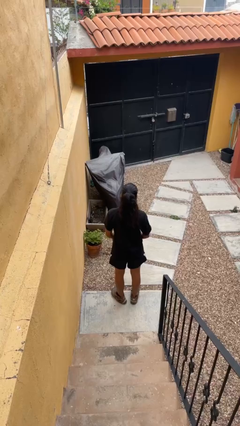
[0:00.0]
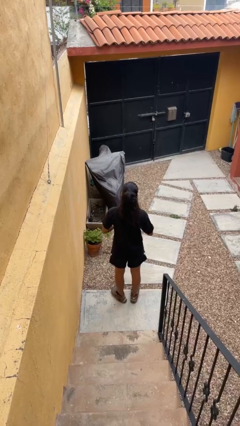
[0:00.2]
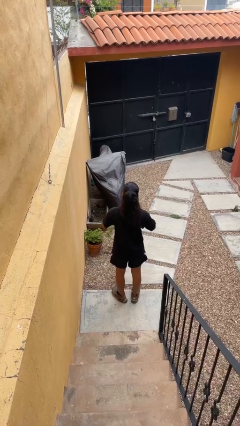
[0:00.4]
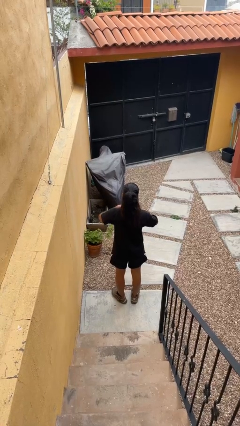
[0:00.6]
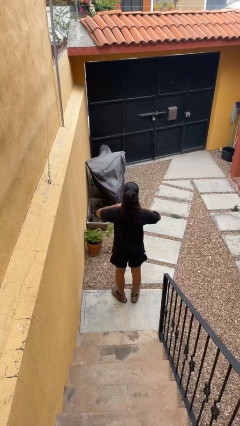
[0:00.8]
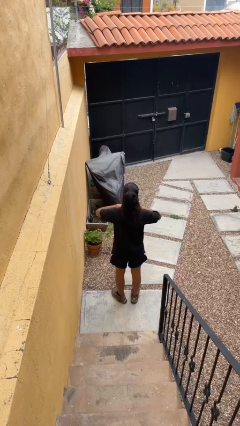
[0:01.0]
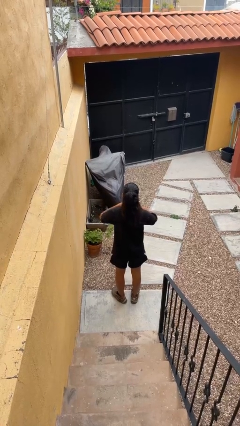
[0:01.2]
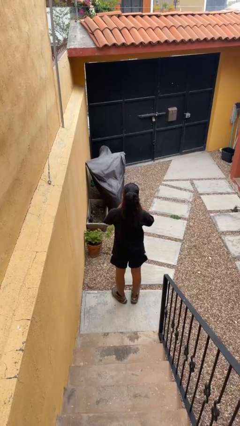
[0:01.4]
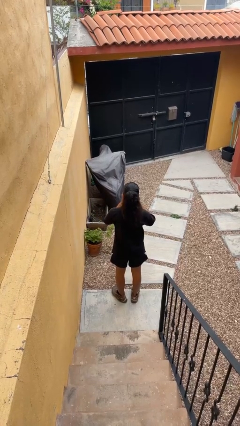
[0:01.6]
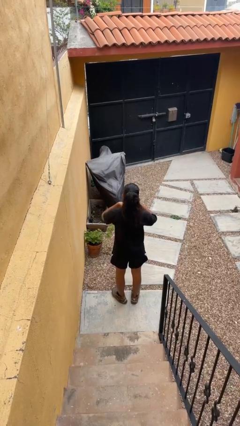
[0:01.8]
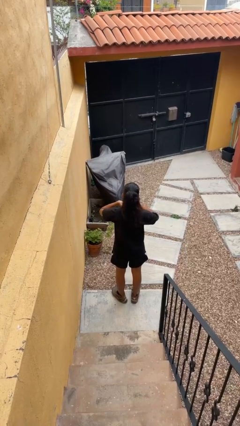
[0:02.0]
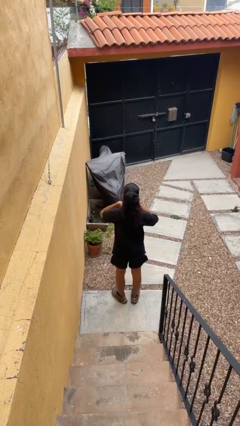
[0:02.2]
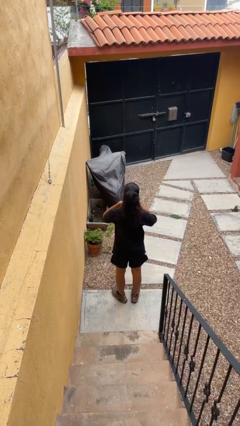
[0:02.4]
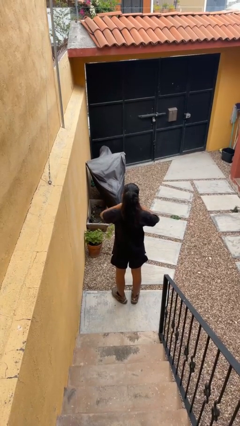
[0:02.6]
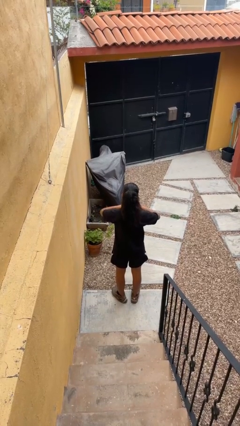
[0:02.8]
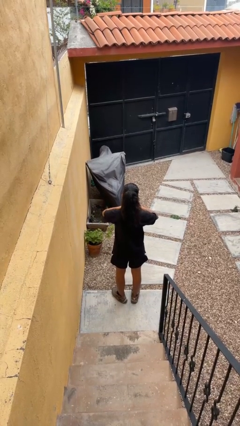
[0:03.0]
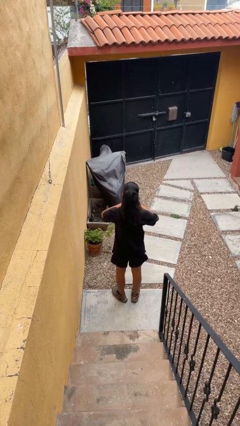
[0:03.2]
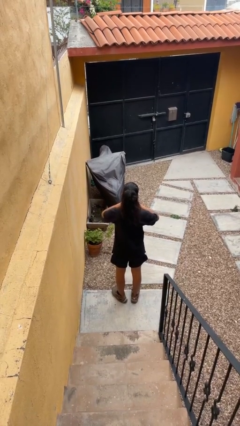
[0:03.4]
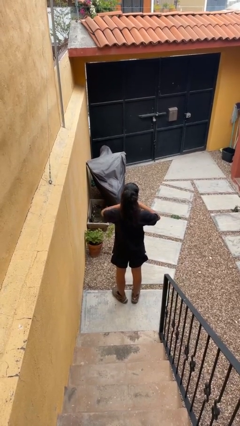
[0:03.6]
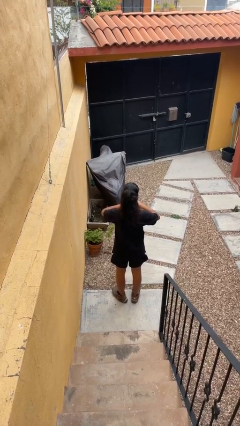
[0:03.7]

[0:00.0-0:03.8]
person cracks knuckles

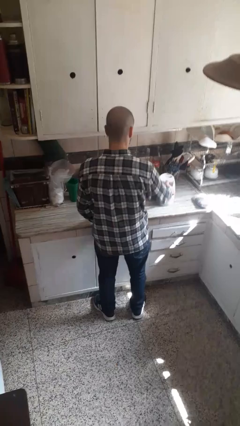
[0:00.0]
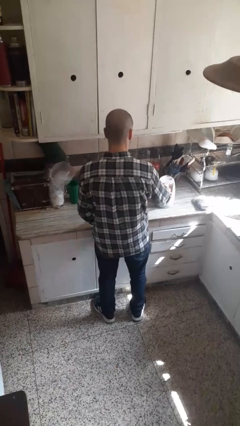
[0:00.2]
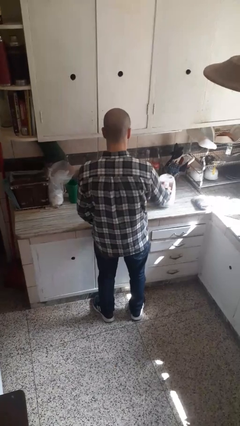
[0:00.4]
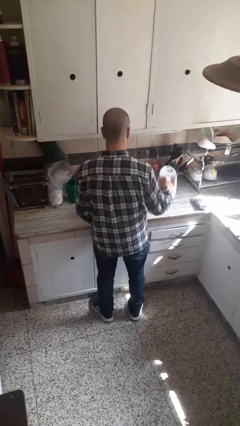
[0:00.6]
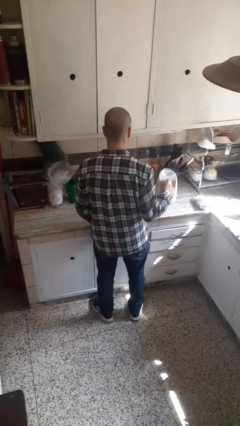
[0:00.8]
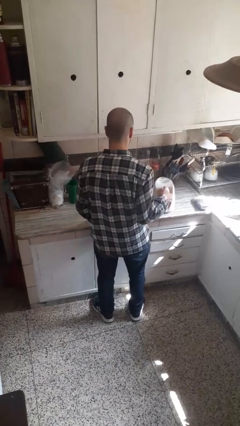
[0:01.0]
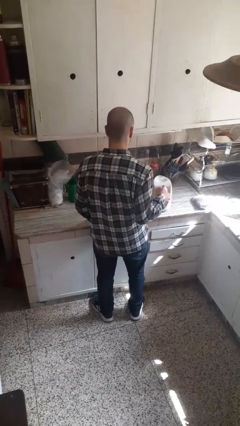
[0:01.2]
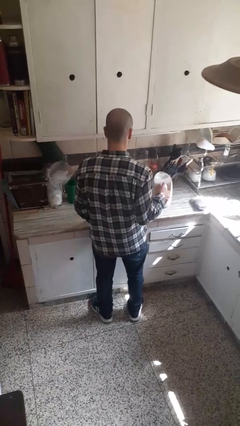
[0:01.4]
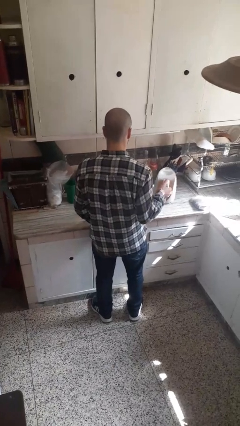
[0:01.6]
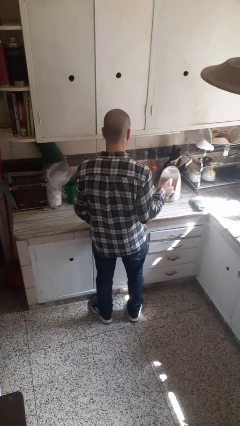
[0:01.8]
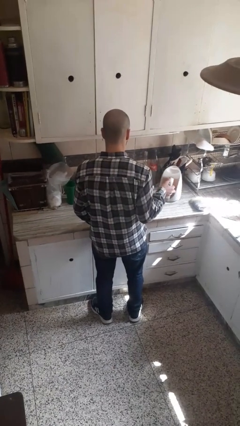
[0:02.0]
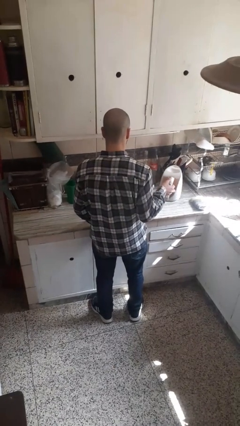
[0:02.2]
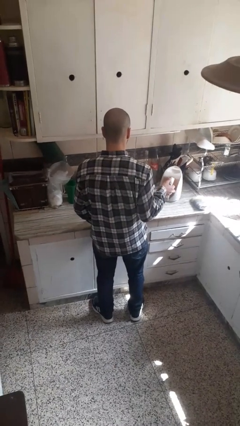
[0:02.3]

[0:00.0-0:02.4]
person picks up object from countertop

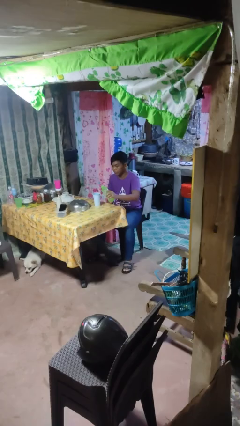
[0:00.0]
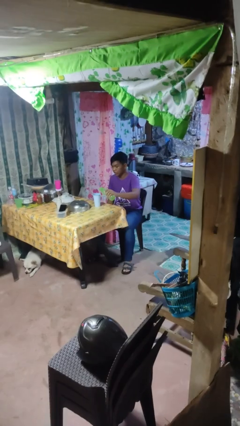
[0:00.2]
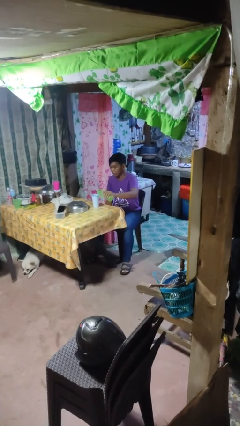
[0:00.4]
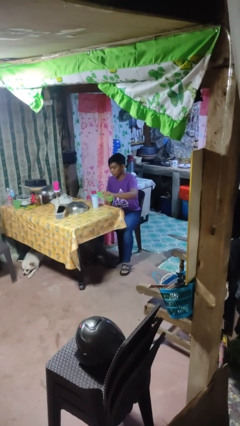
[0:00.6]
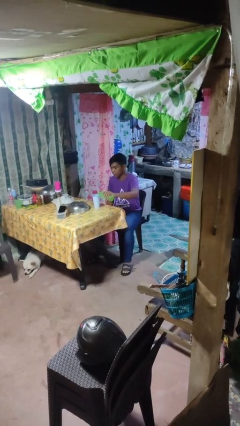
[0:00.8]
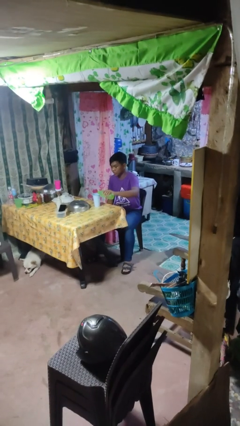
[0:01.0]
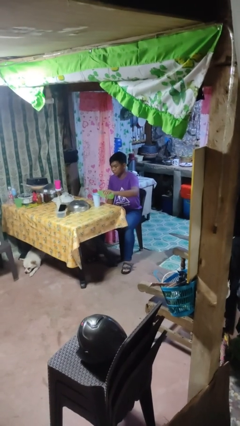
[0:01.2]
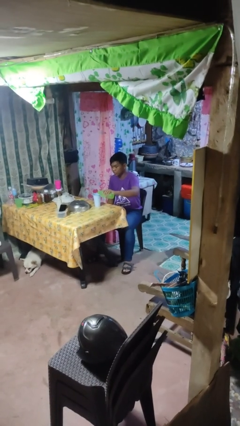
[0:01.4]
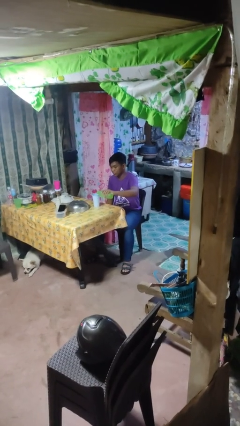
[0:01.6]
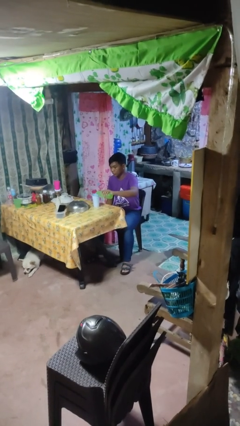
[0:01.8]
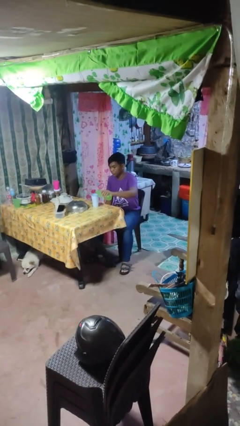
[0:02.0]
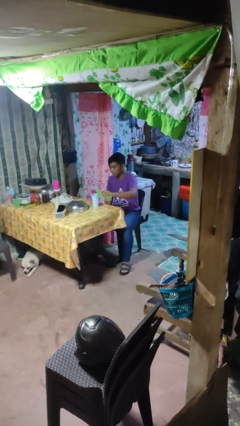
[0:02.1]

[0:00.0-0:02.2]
person pours liquid into cup

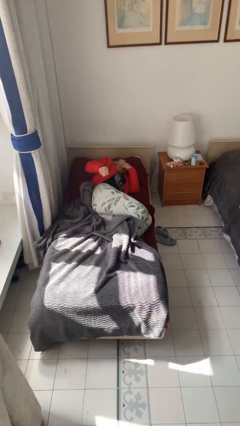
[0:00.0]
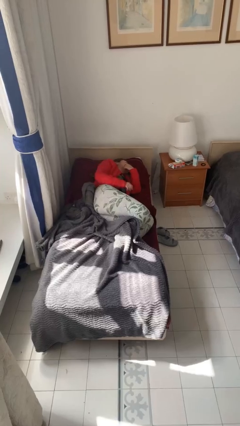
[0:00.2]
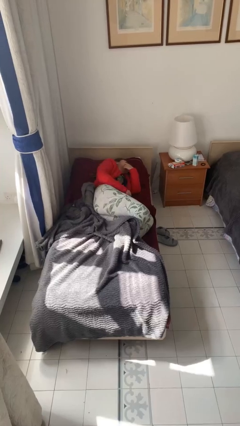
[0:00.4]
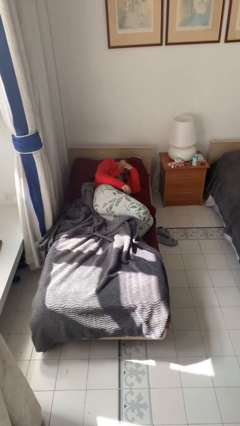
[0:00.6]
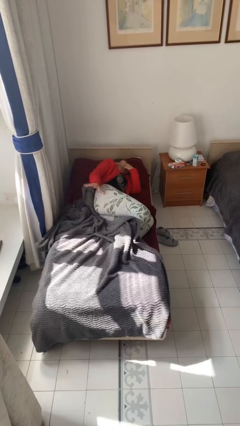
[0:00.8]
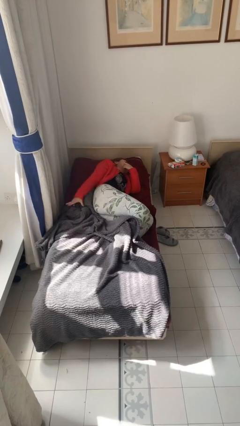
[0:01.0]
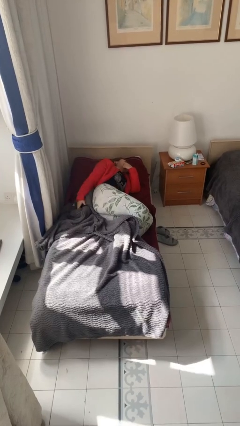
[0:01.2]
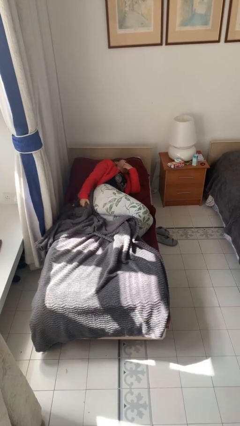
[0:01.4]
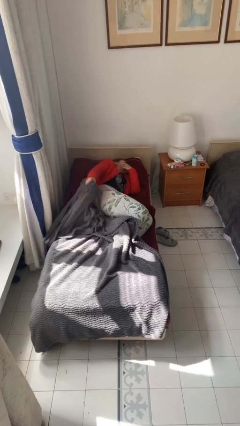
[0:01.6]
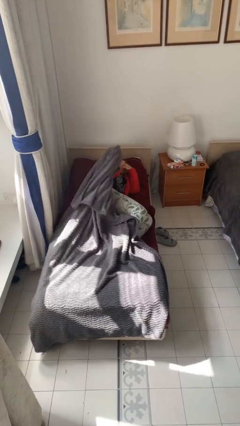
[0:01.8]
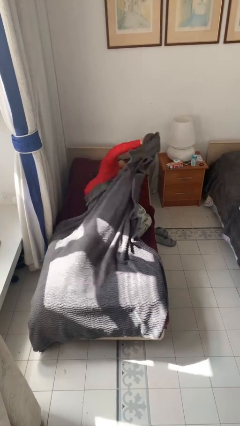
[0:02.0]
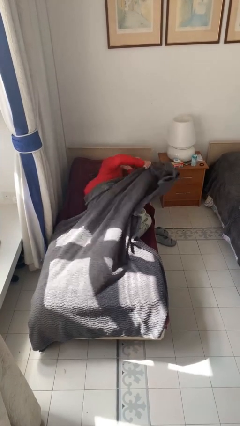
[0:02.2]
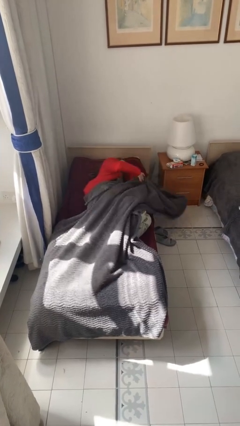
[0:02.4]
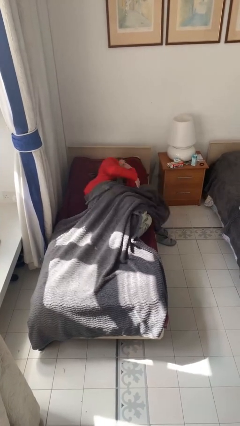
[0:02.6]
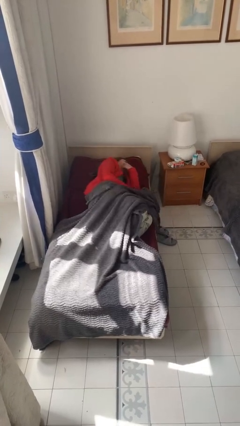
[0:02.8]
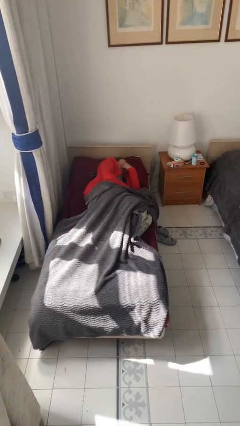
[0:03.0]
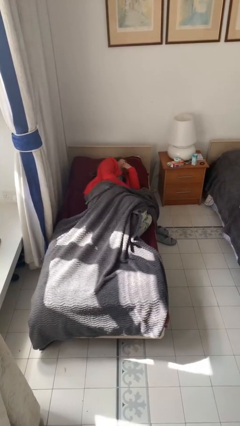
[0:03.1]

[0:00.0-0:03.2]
person covers with bedsheets

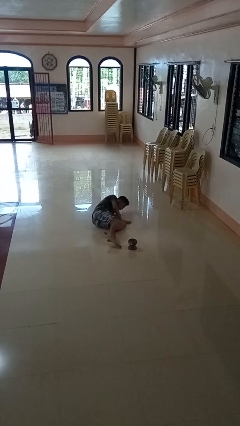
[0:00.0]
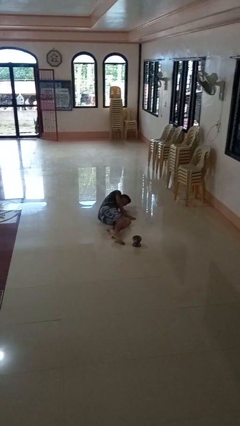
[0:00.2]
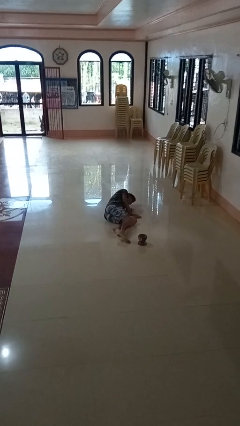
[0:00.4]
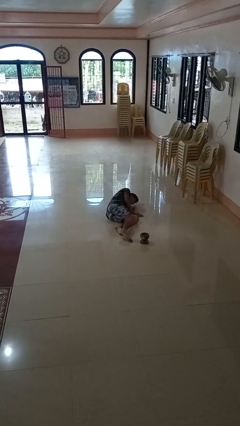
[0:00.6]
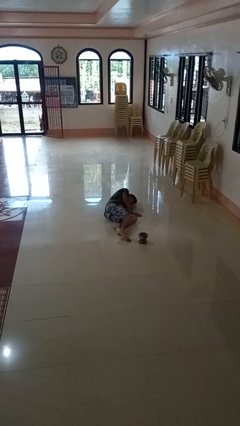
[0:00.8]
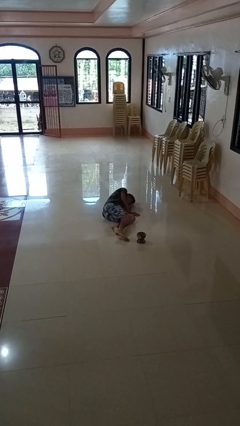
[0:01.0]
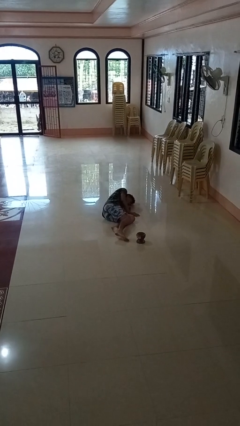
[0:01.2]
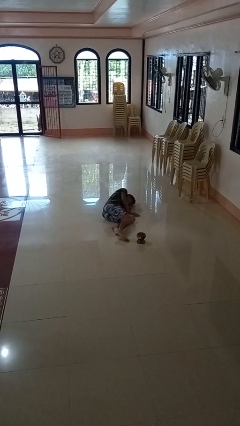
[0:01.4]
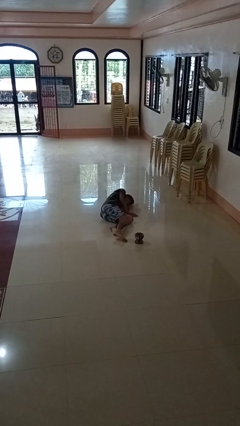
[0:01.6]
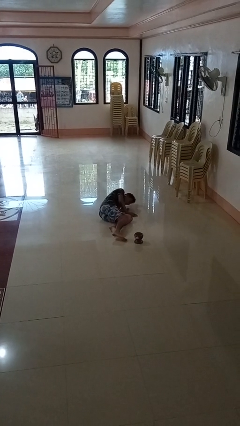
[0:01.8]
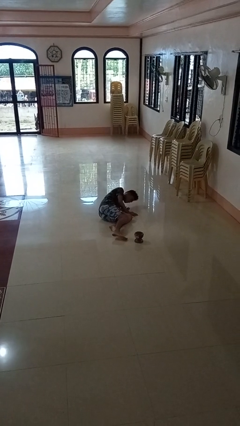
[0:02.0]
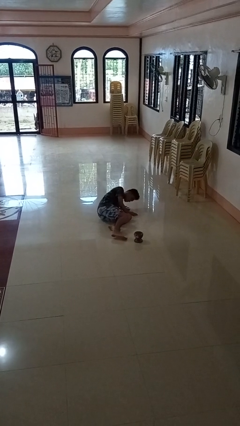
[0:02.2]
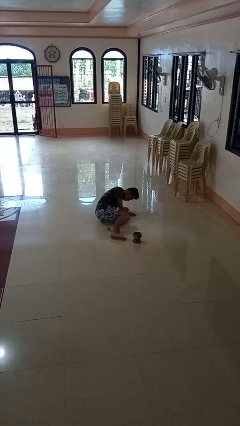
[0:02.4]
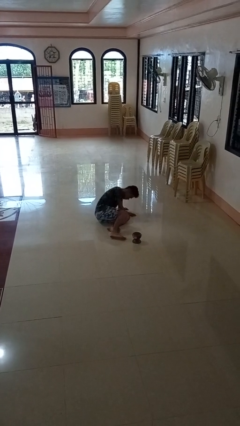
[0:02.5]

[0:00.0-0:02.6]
person lies down on floor

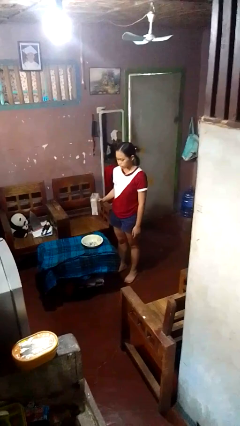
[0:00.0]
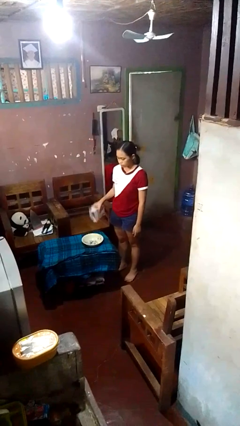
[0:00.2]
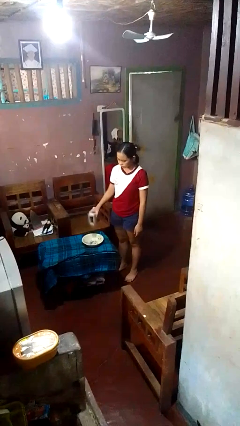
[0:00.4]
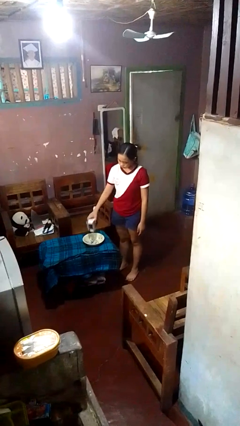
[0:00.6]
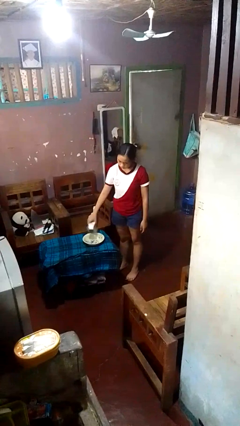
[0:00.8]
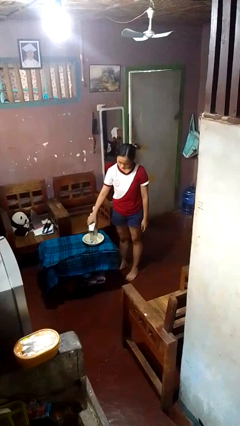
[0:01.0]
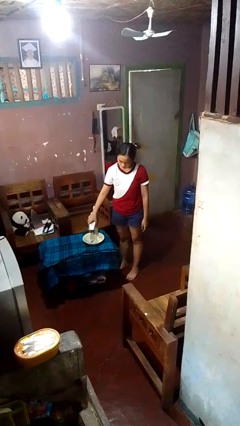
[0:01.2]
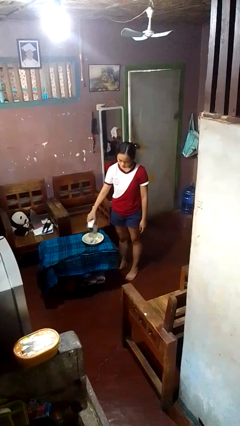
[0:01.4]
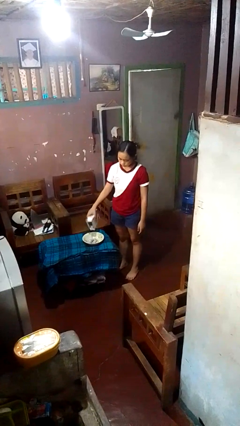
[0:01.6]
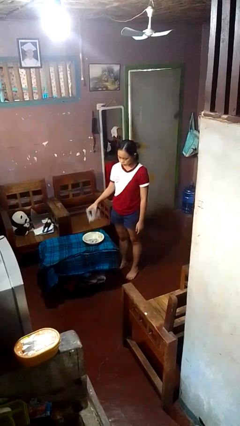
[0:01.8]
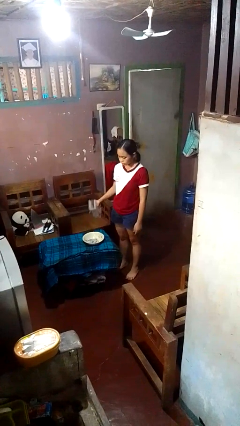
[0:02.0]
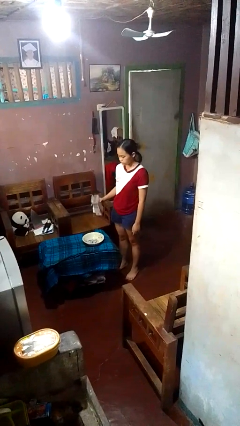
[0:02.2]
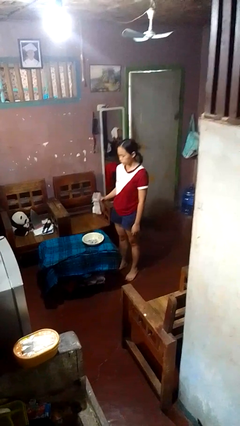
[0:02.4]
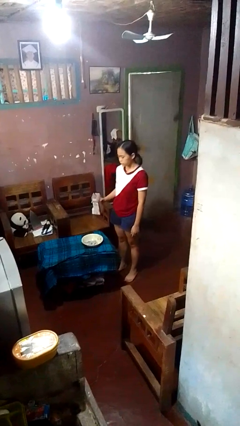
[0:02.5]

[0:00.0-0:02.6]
person pours into bowl

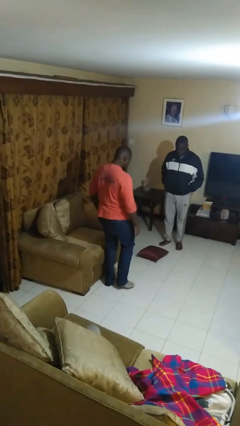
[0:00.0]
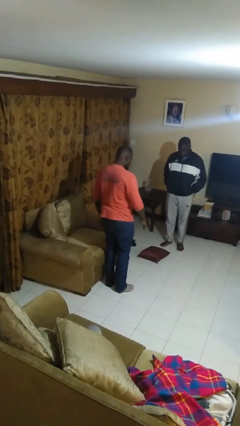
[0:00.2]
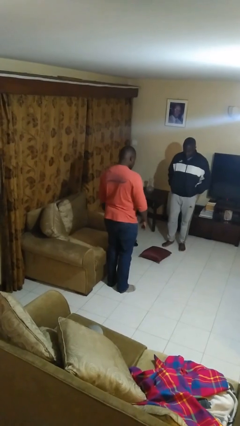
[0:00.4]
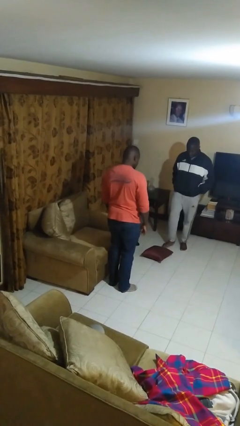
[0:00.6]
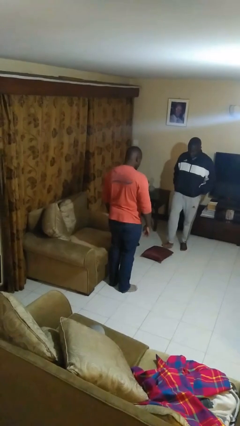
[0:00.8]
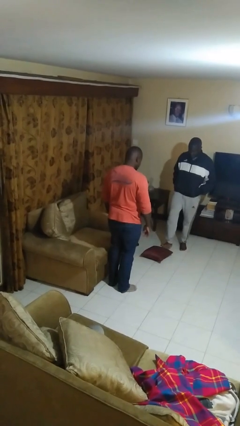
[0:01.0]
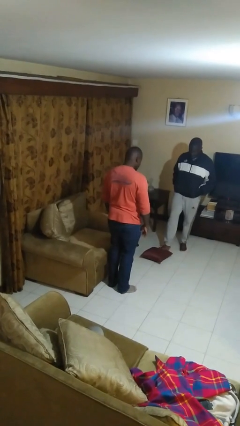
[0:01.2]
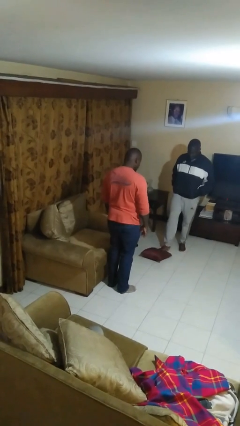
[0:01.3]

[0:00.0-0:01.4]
person kicks object to person
